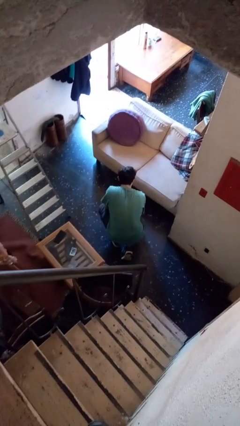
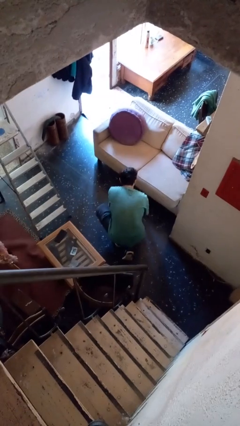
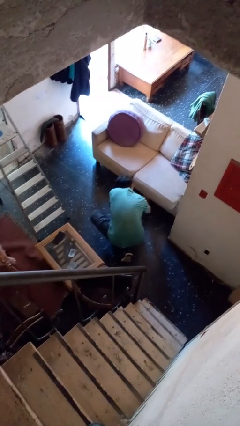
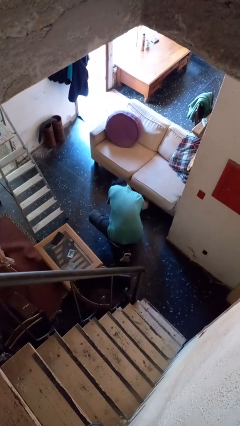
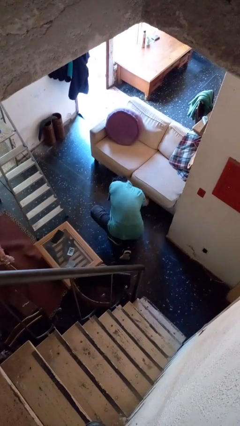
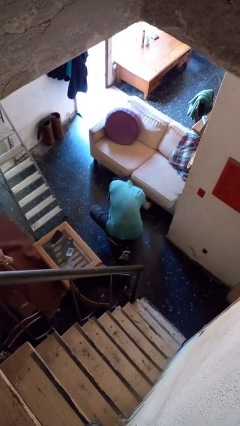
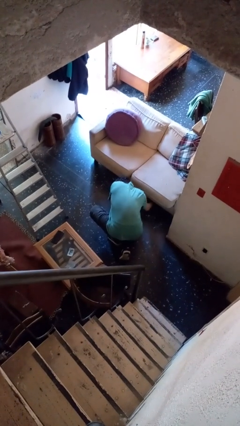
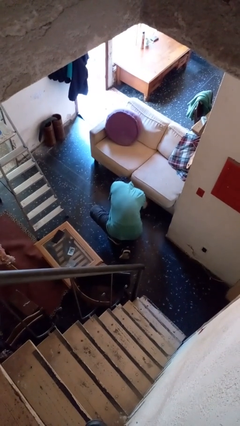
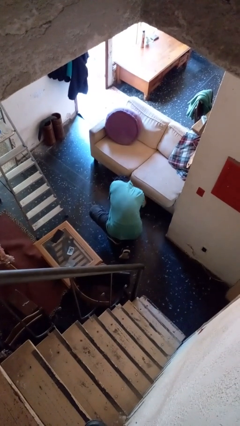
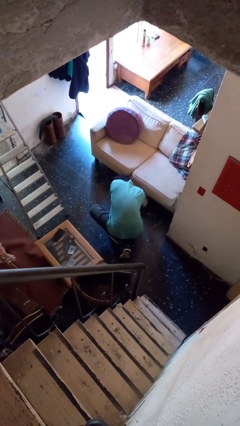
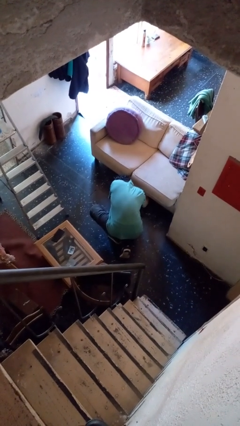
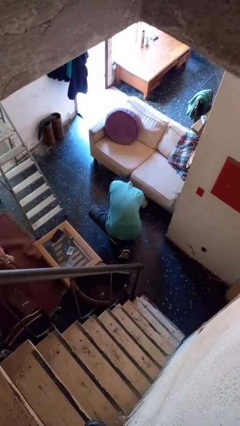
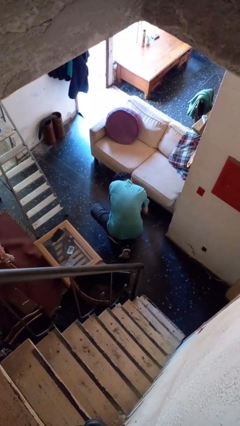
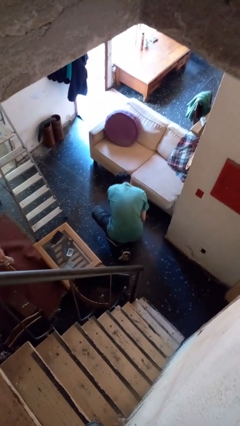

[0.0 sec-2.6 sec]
person searches under couch

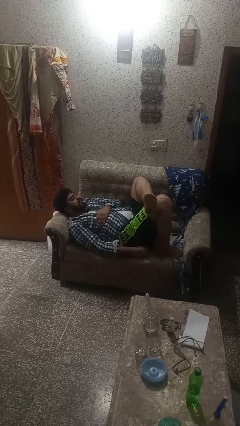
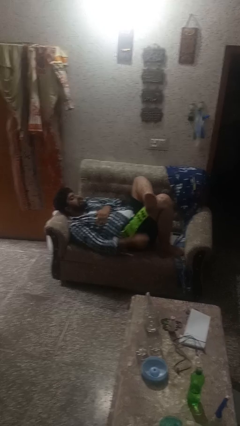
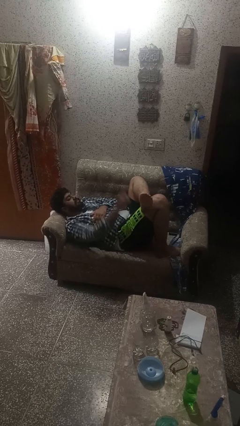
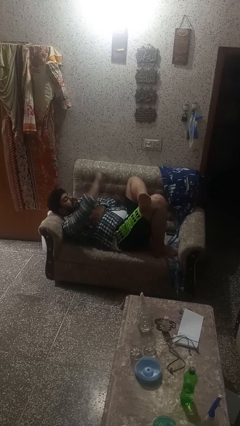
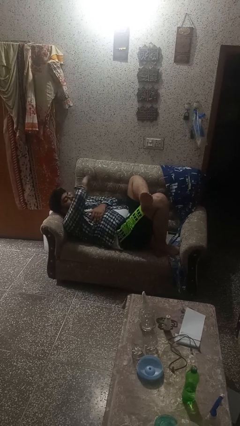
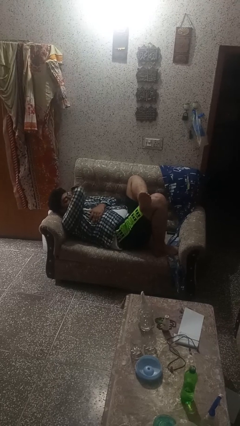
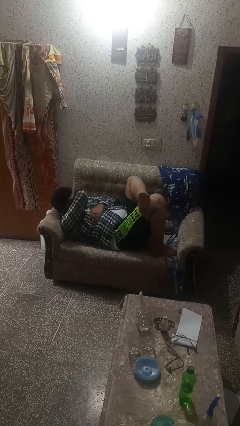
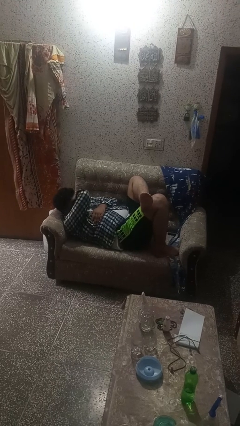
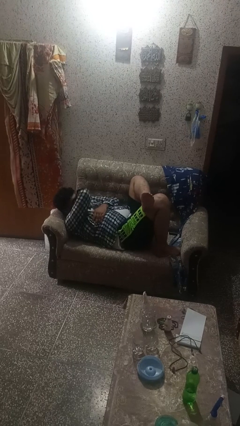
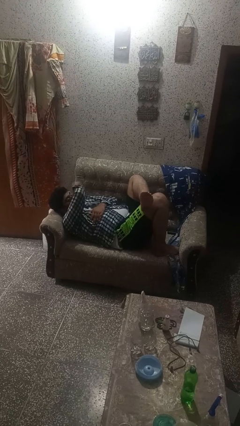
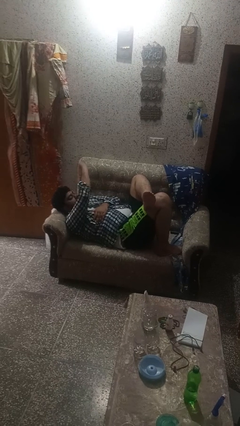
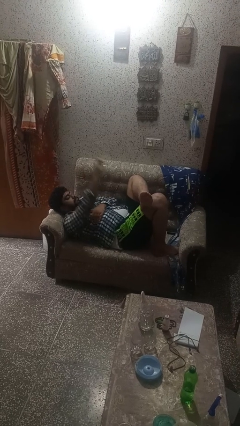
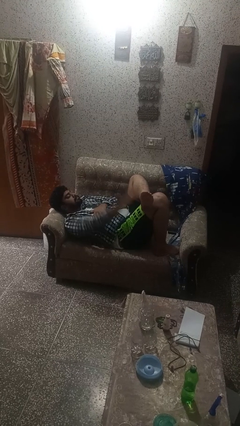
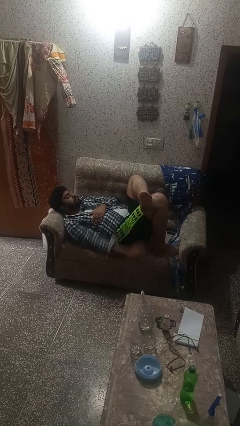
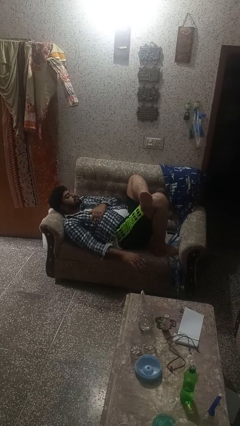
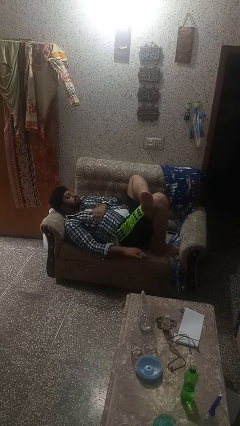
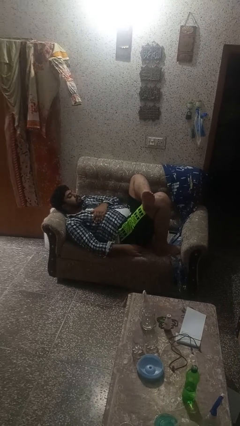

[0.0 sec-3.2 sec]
person sneezes into arm

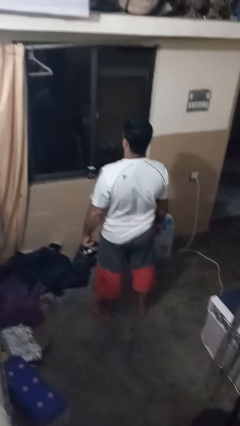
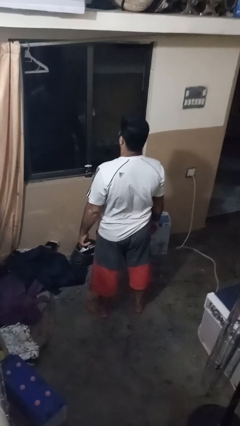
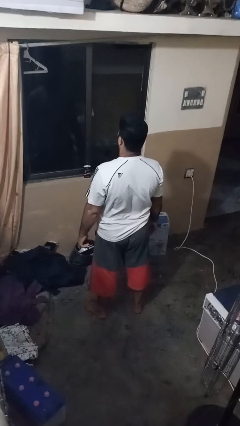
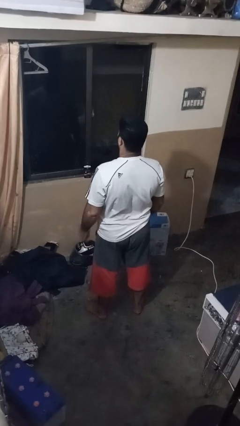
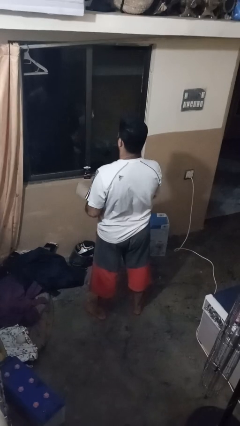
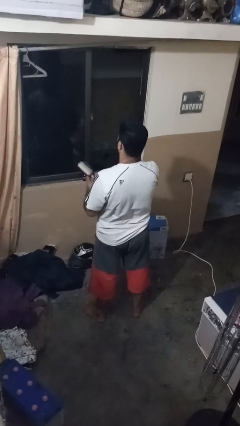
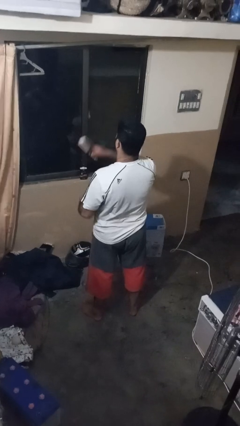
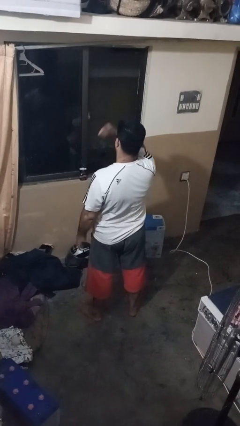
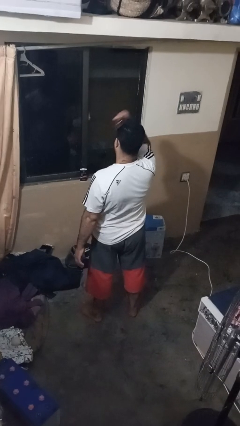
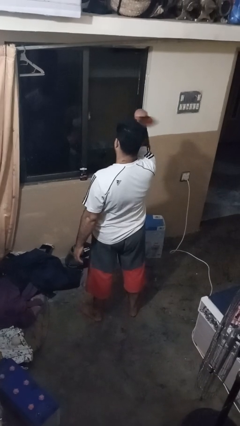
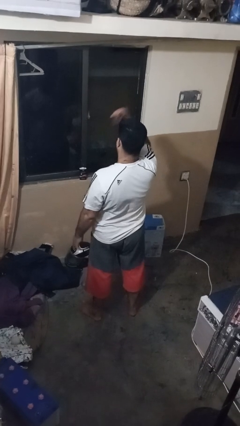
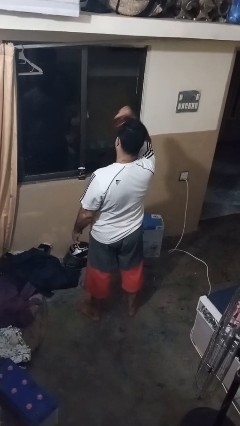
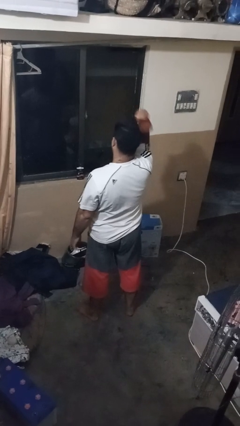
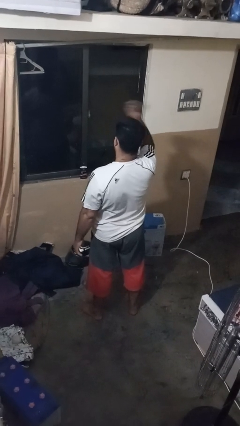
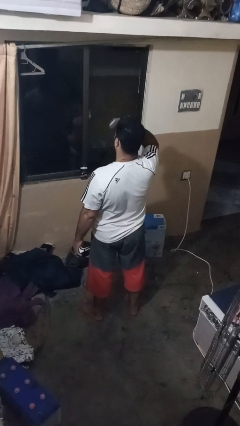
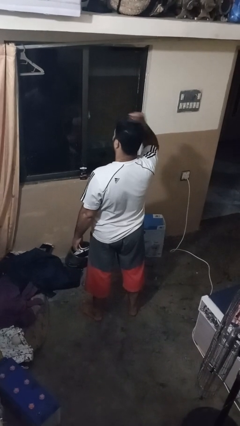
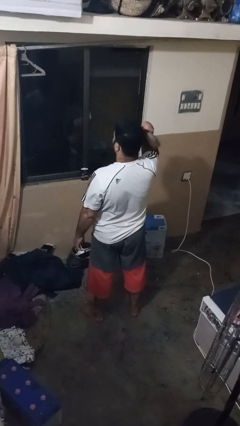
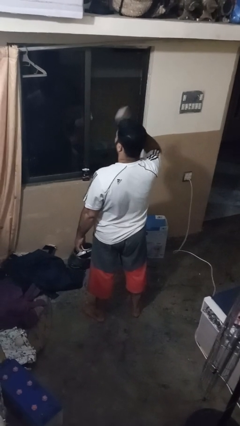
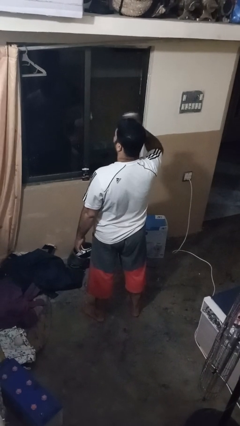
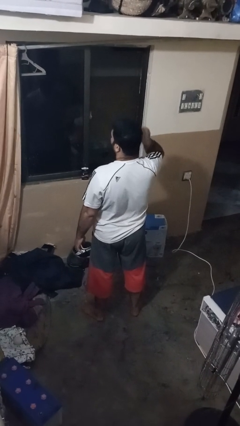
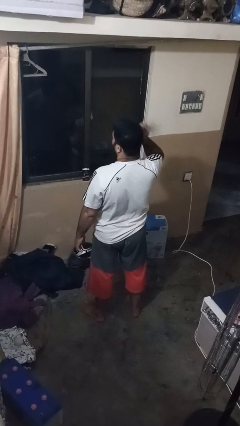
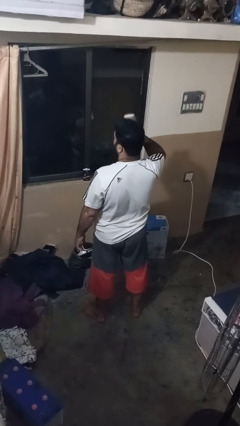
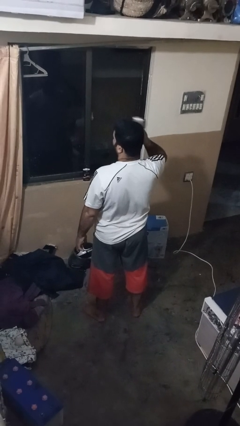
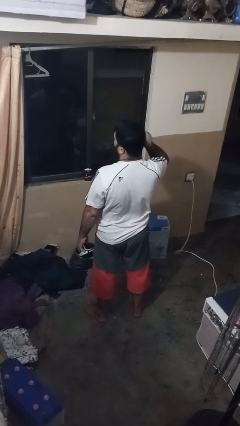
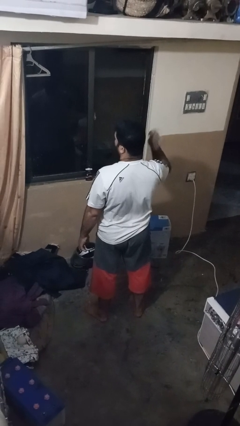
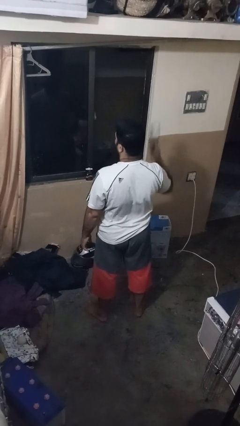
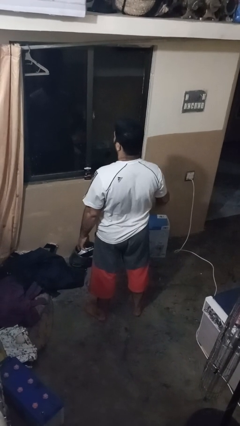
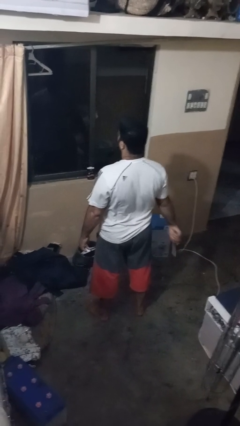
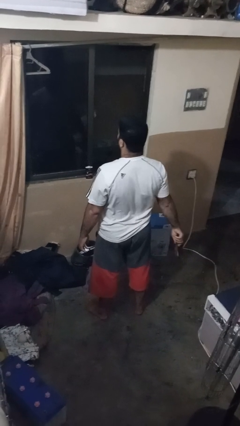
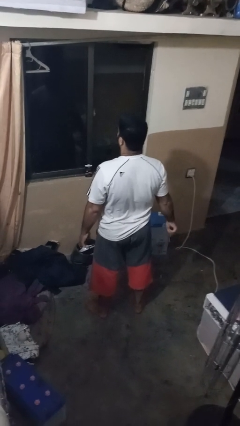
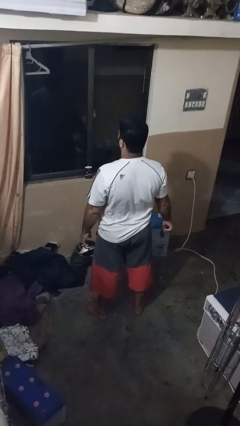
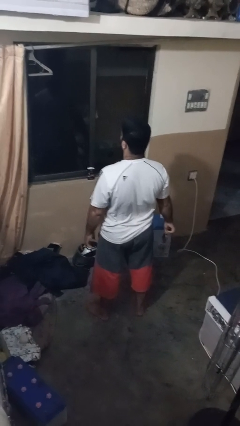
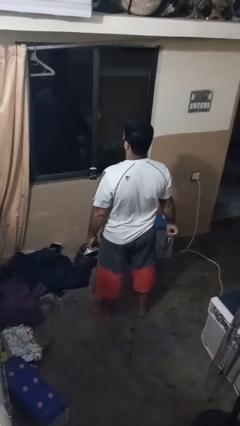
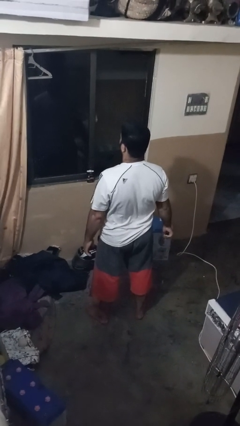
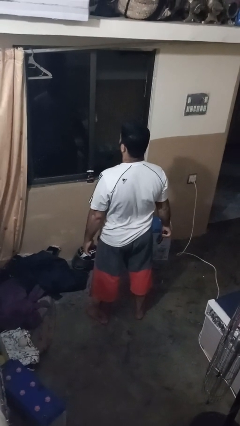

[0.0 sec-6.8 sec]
person brushes hair

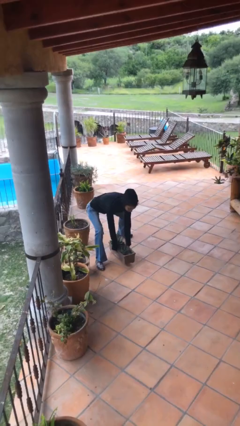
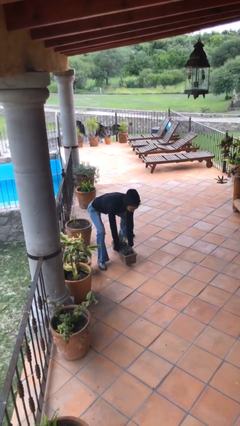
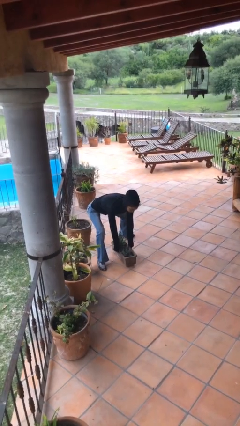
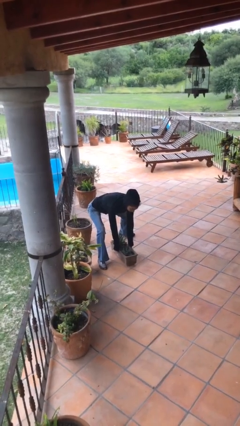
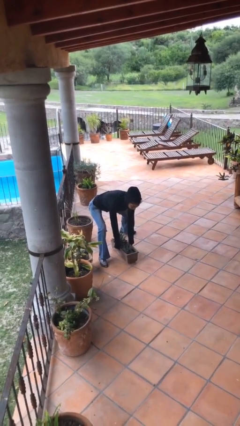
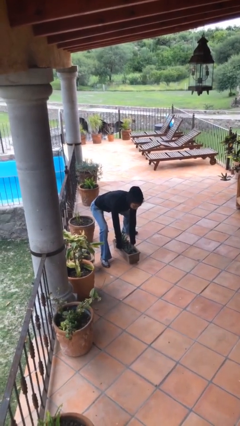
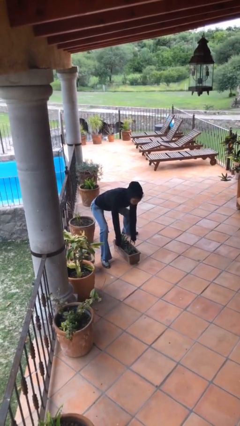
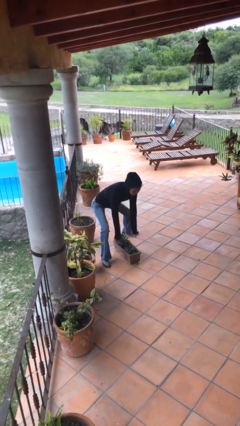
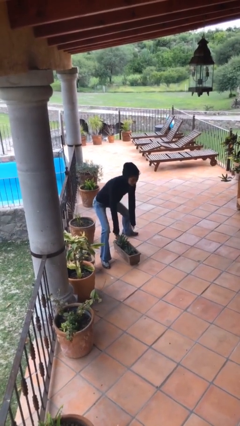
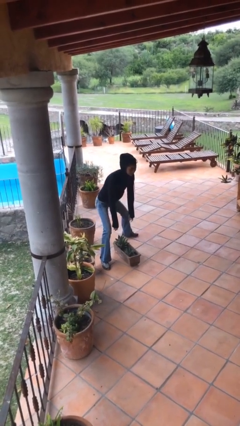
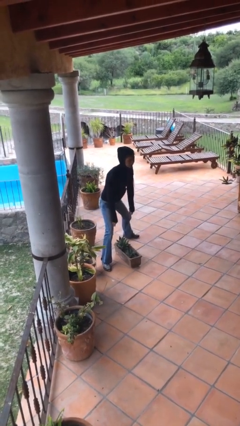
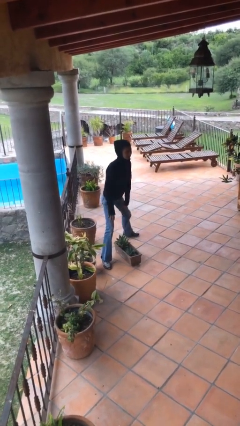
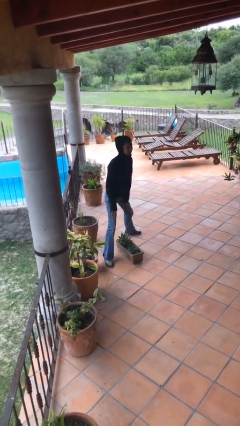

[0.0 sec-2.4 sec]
person puts down object on floor

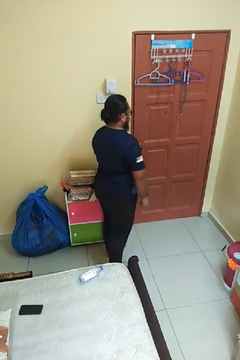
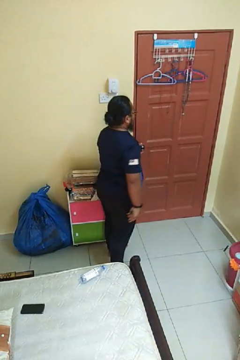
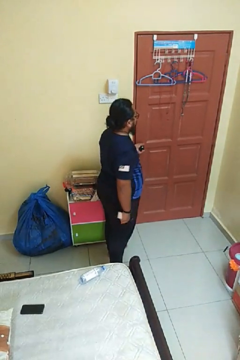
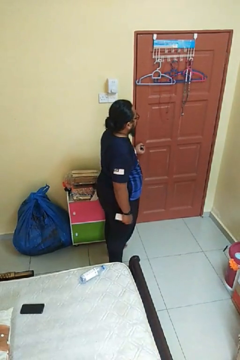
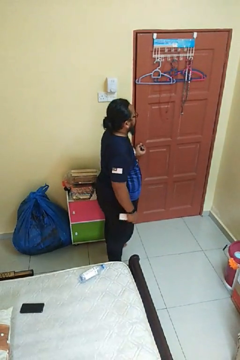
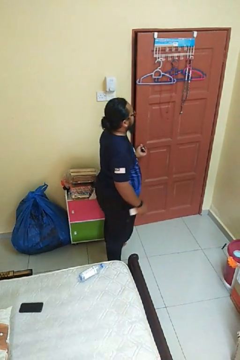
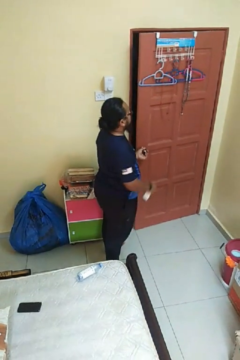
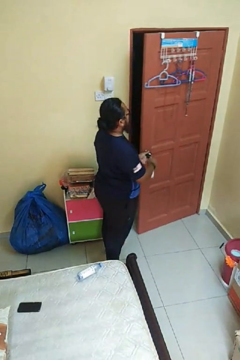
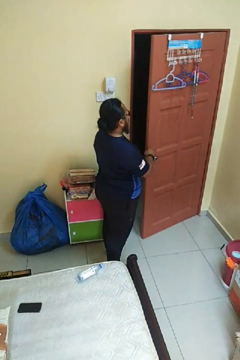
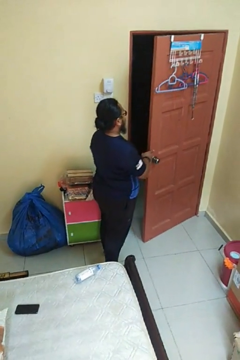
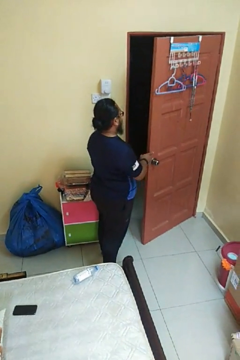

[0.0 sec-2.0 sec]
person opens facility door

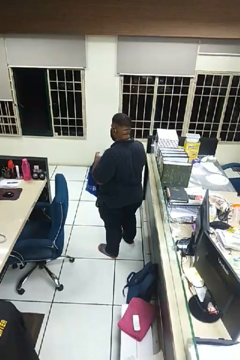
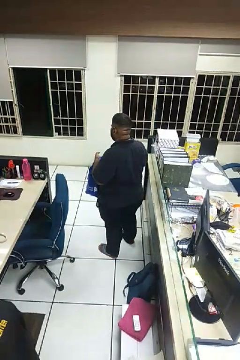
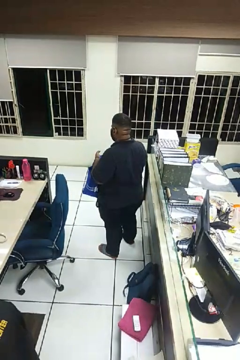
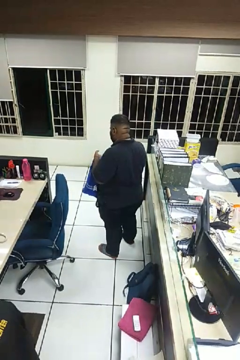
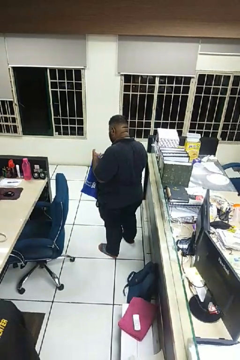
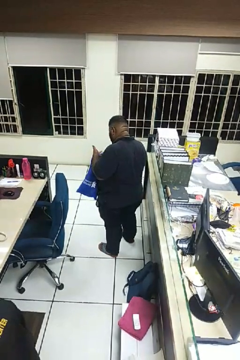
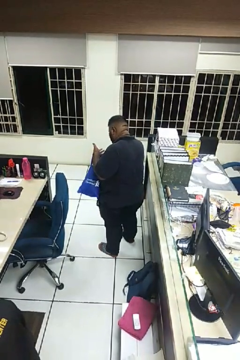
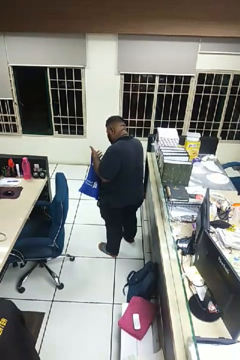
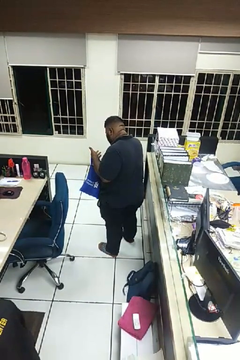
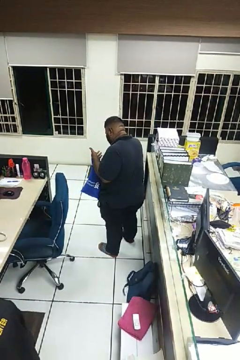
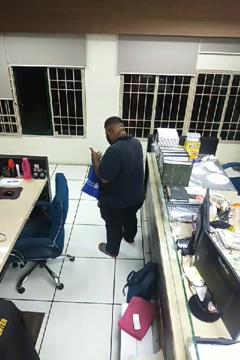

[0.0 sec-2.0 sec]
person searches in bag
